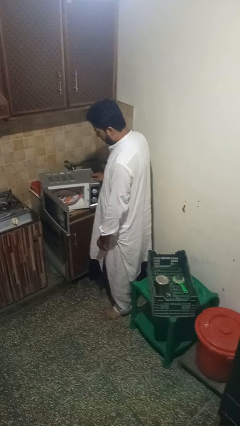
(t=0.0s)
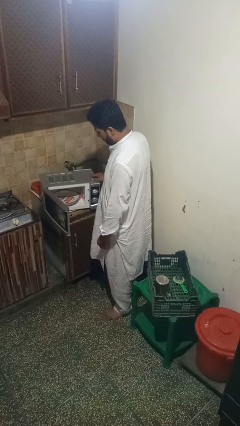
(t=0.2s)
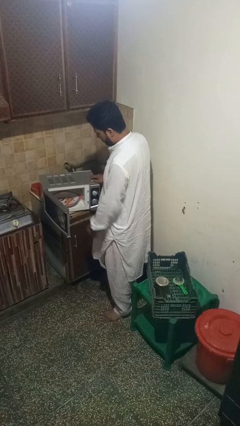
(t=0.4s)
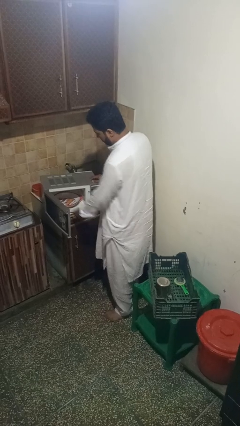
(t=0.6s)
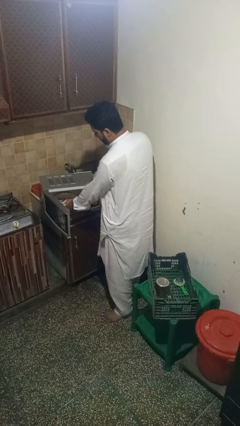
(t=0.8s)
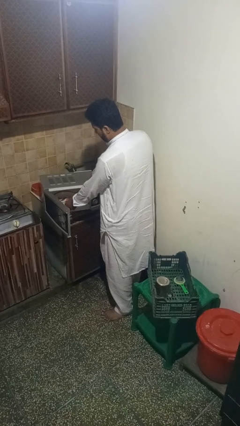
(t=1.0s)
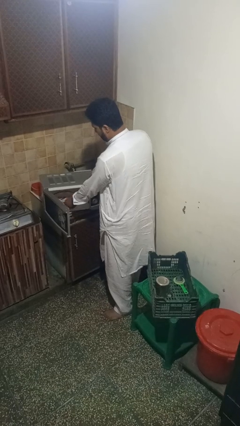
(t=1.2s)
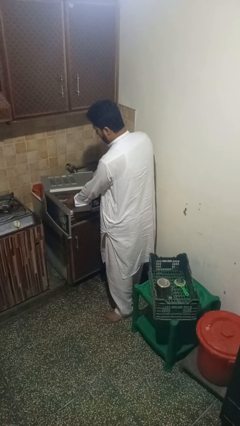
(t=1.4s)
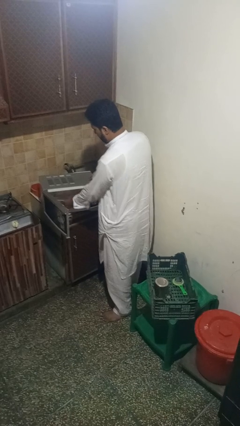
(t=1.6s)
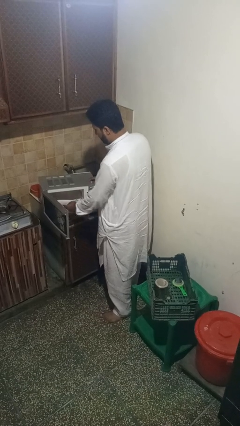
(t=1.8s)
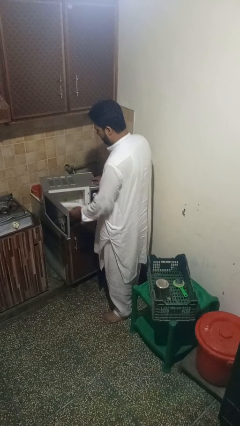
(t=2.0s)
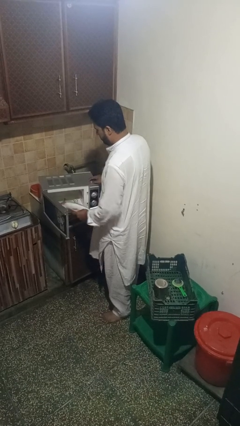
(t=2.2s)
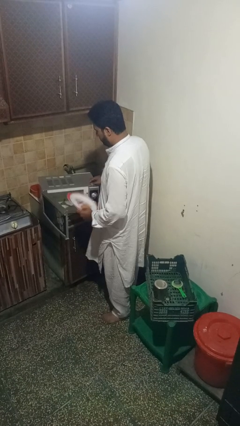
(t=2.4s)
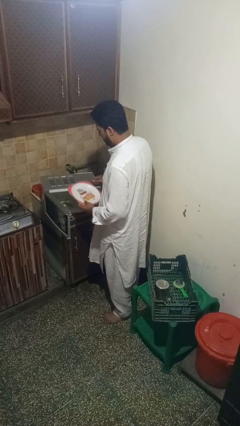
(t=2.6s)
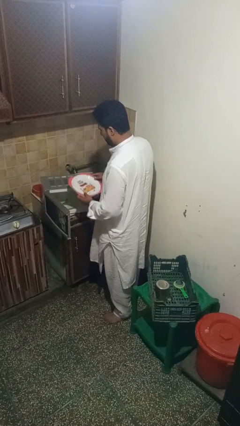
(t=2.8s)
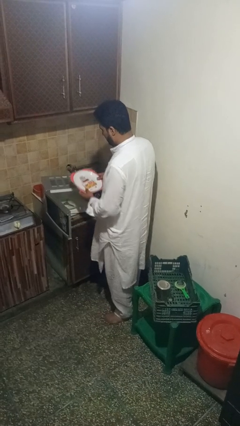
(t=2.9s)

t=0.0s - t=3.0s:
person takes object from microwave

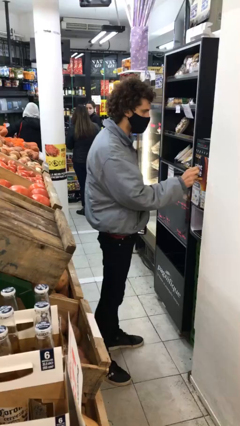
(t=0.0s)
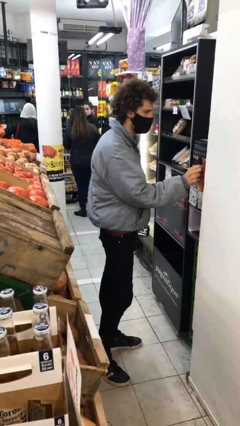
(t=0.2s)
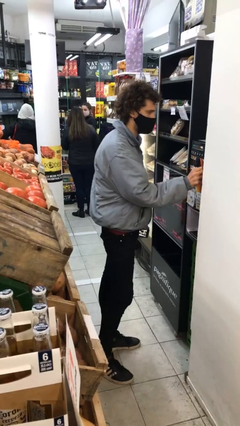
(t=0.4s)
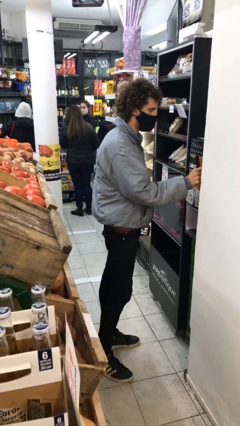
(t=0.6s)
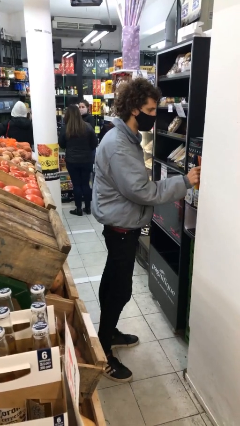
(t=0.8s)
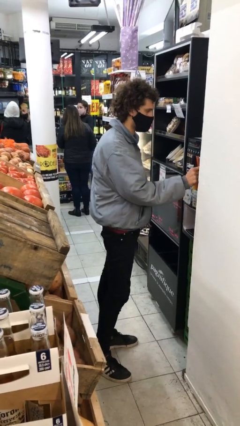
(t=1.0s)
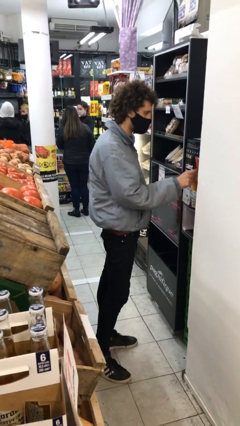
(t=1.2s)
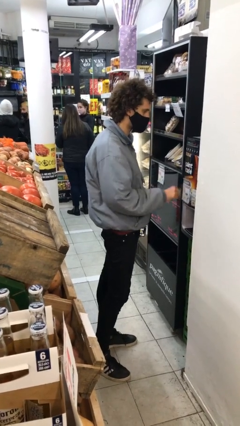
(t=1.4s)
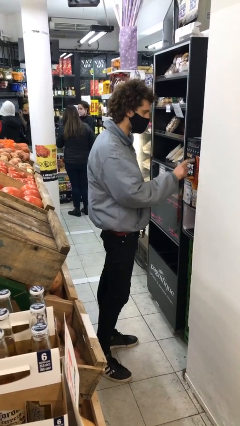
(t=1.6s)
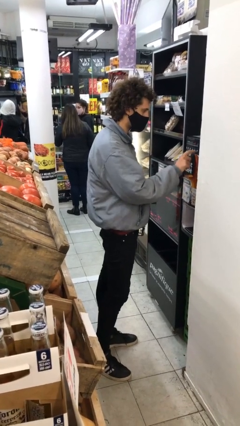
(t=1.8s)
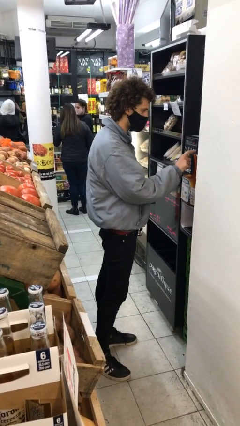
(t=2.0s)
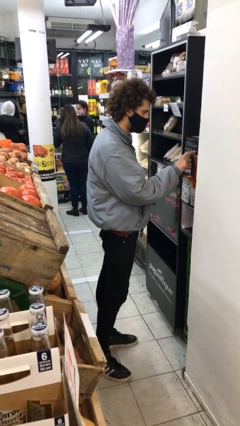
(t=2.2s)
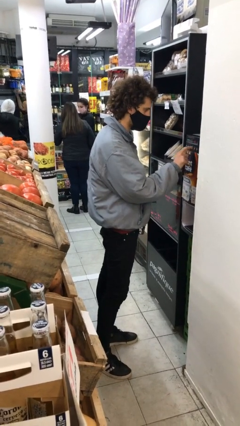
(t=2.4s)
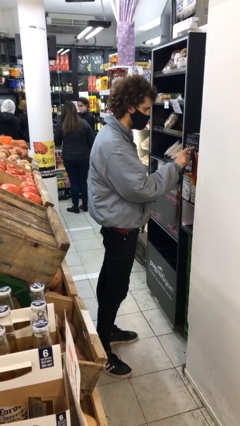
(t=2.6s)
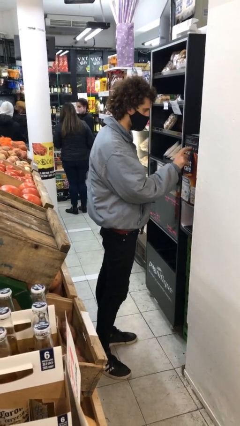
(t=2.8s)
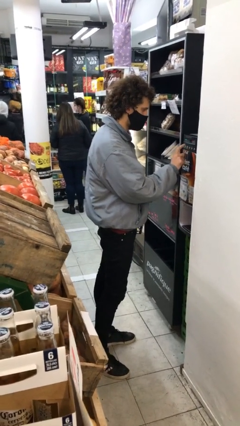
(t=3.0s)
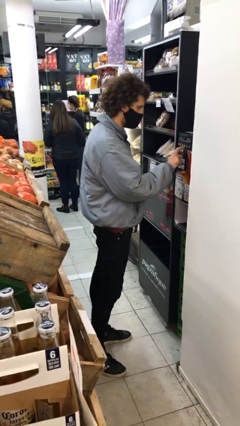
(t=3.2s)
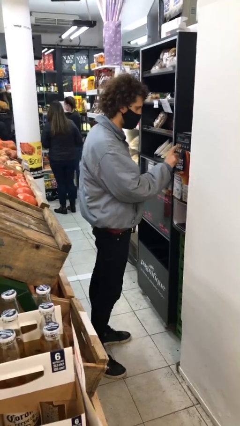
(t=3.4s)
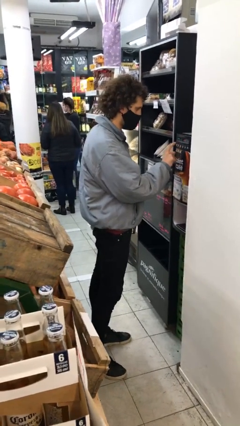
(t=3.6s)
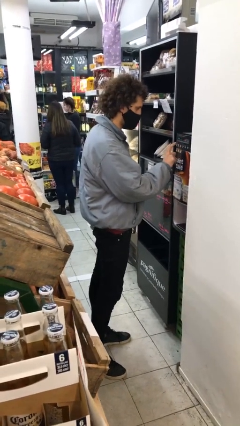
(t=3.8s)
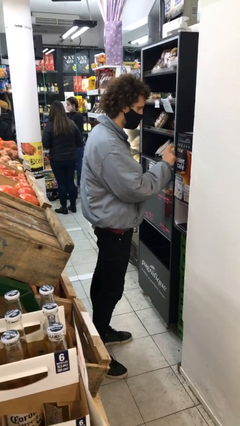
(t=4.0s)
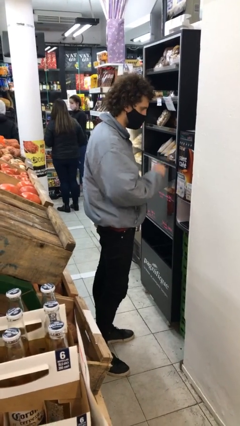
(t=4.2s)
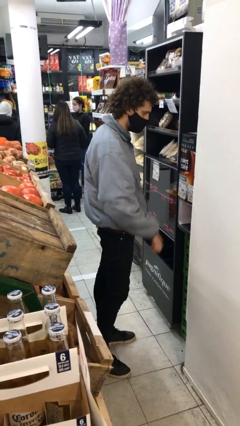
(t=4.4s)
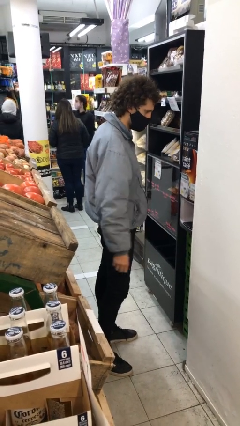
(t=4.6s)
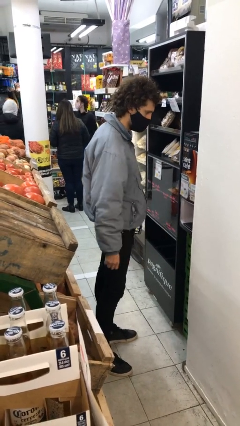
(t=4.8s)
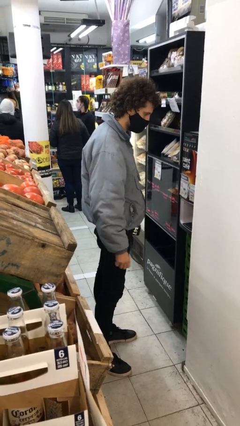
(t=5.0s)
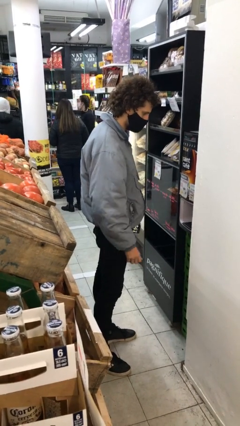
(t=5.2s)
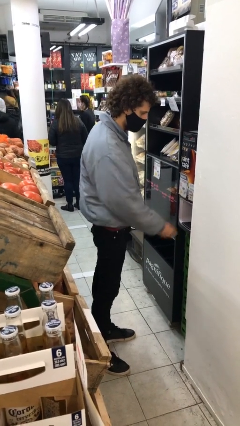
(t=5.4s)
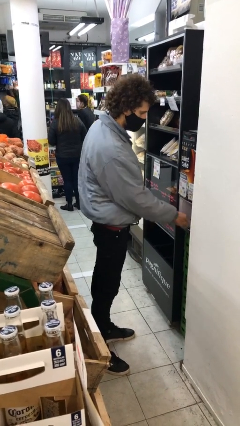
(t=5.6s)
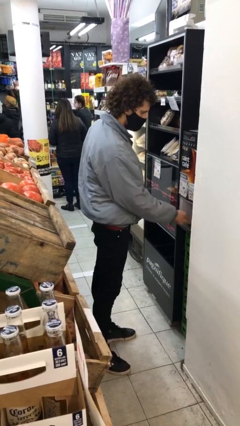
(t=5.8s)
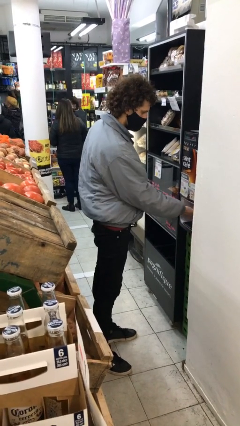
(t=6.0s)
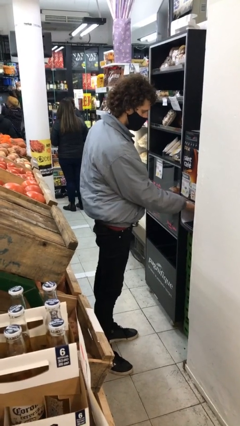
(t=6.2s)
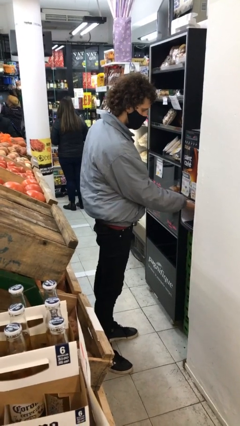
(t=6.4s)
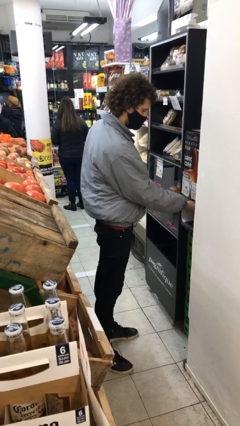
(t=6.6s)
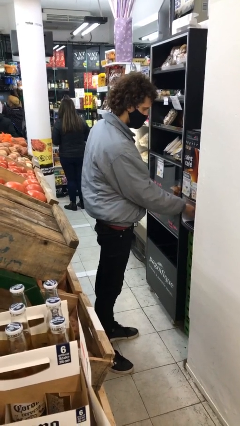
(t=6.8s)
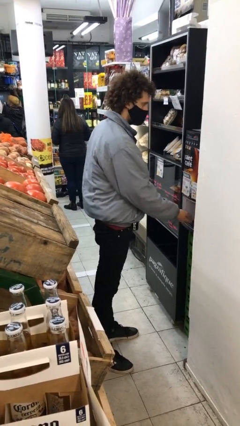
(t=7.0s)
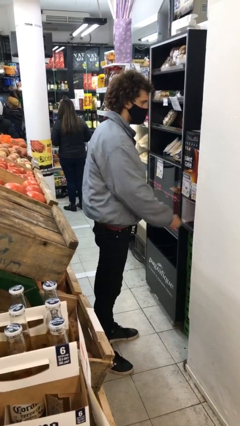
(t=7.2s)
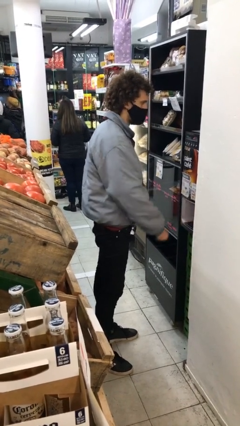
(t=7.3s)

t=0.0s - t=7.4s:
person purchases from machine

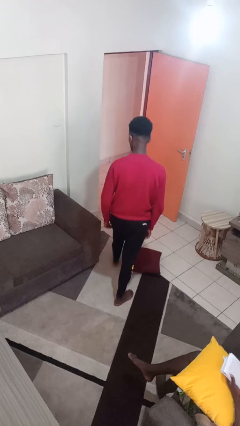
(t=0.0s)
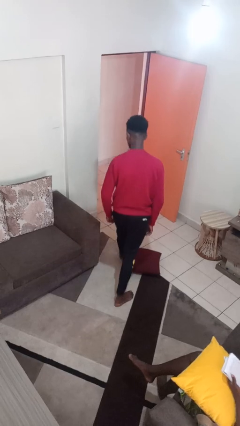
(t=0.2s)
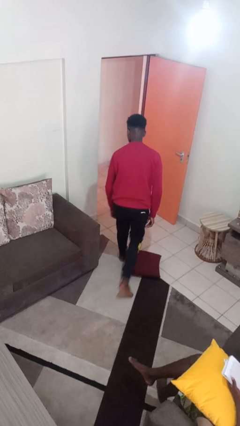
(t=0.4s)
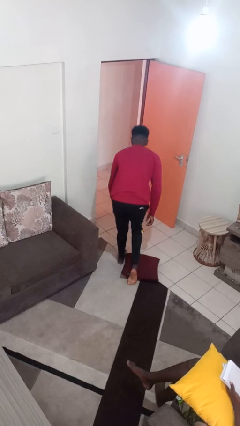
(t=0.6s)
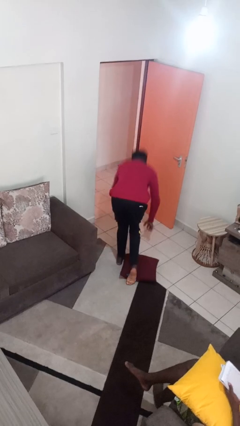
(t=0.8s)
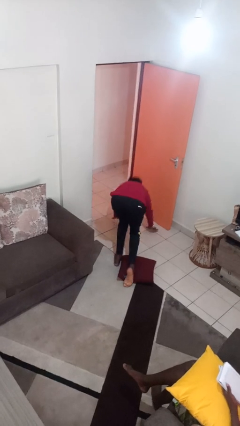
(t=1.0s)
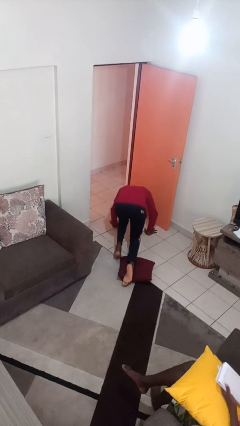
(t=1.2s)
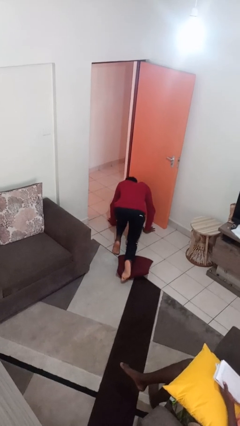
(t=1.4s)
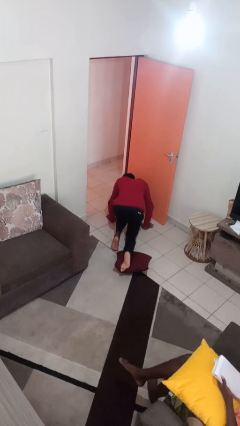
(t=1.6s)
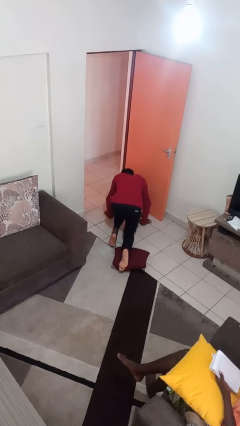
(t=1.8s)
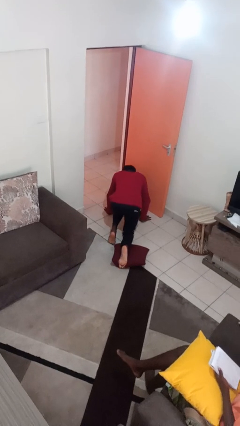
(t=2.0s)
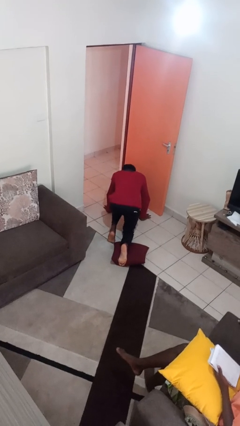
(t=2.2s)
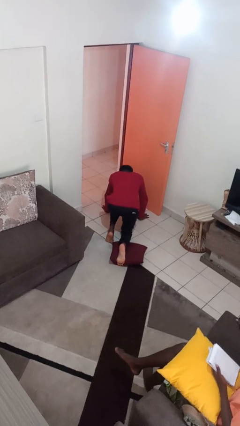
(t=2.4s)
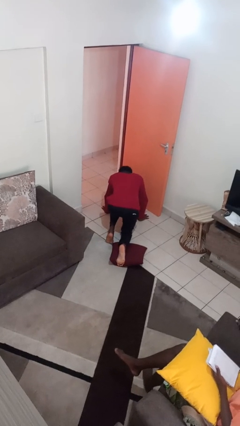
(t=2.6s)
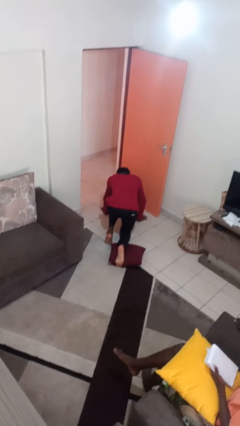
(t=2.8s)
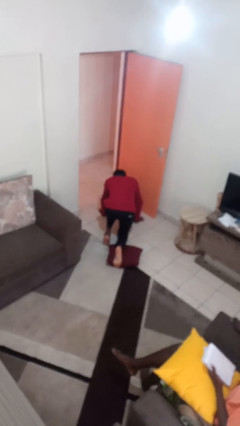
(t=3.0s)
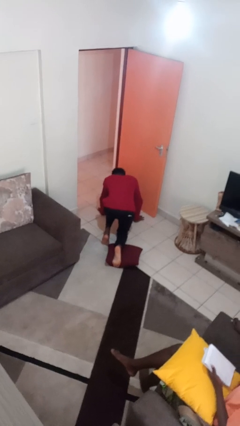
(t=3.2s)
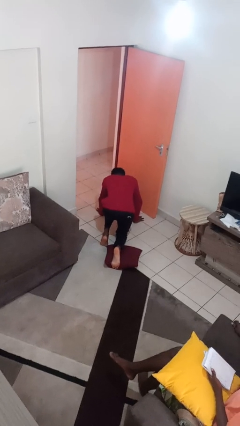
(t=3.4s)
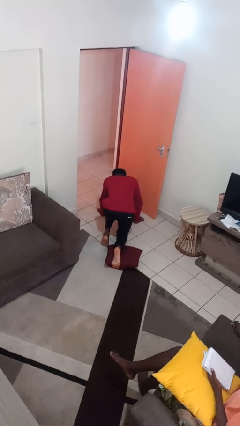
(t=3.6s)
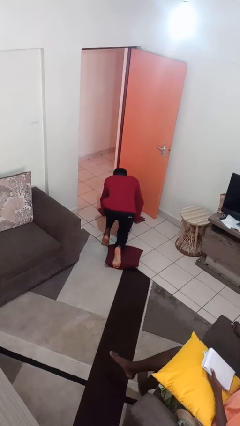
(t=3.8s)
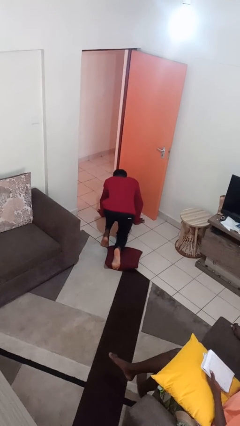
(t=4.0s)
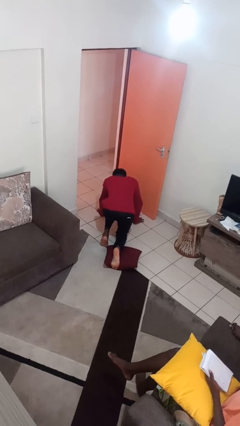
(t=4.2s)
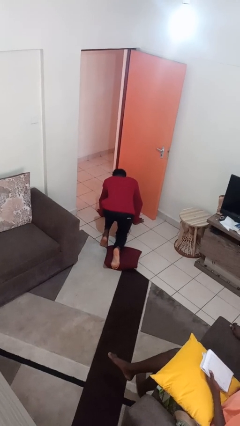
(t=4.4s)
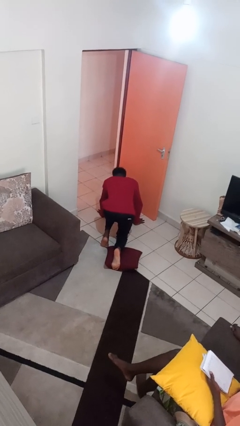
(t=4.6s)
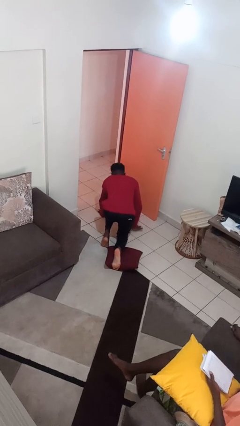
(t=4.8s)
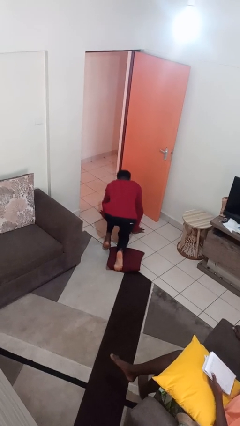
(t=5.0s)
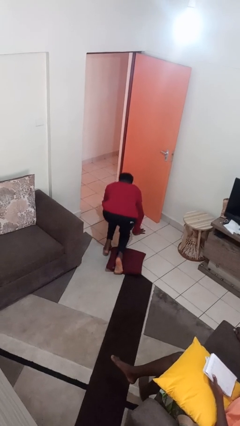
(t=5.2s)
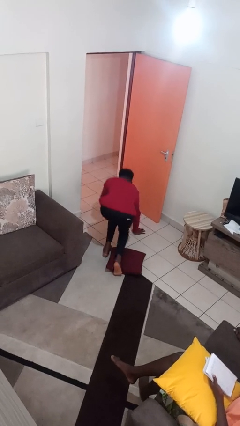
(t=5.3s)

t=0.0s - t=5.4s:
person trips on object on floor

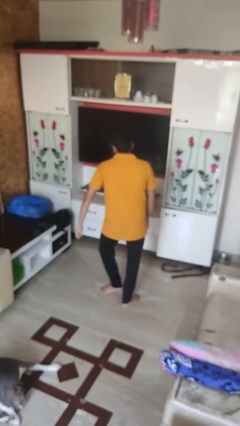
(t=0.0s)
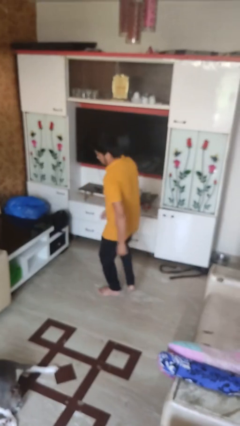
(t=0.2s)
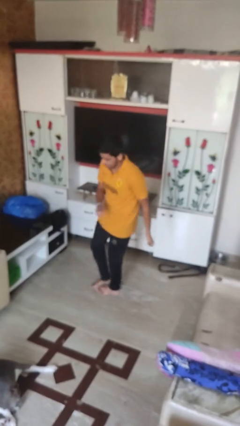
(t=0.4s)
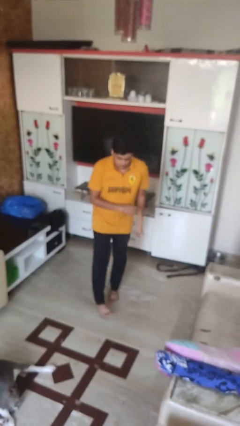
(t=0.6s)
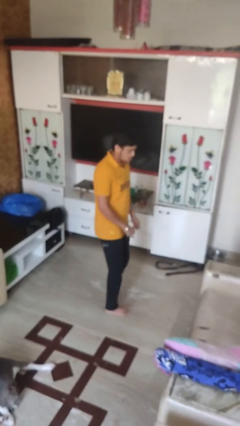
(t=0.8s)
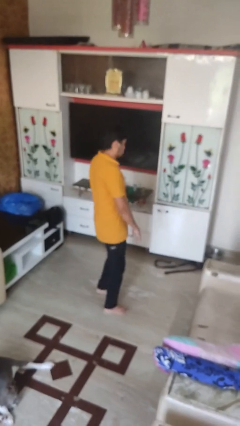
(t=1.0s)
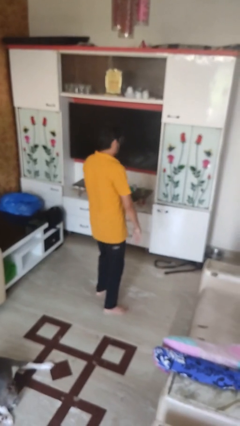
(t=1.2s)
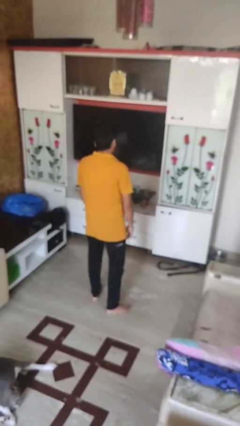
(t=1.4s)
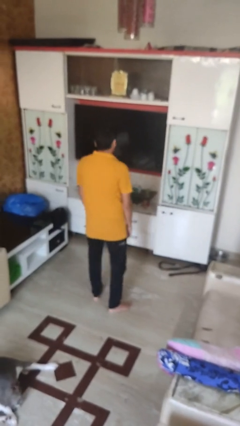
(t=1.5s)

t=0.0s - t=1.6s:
person twirls

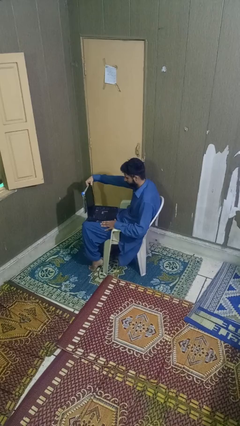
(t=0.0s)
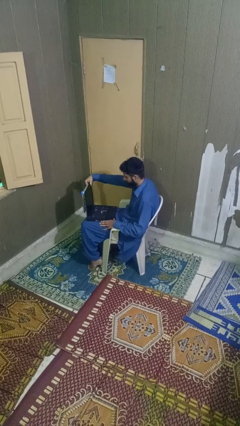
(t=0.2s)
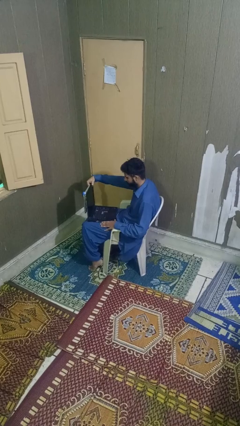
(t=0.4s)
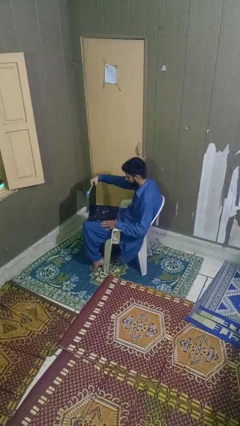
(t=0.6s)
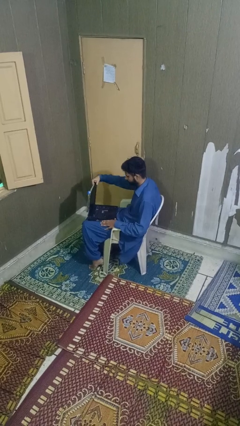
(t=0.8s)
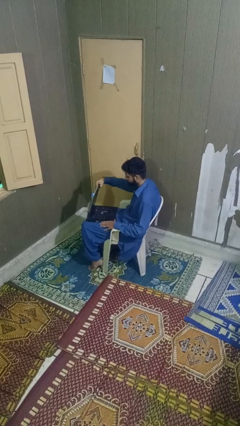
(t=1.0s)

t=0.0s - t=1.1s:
person closes laptop
